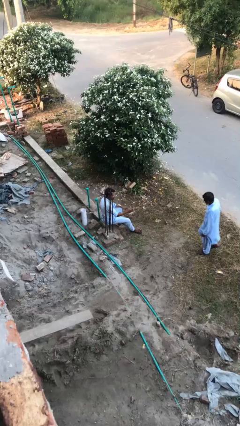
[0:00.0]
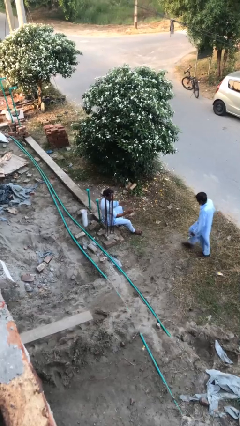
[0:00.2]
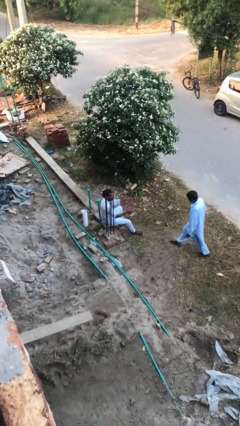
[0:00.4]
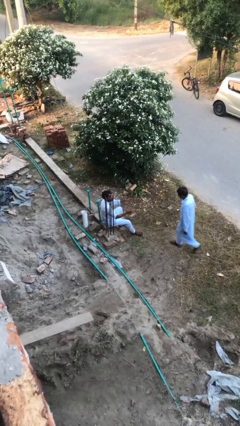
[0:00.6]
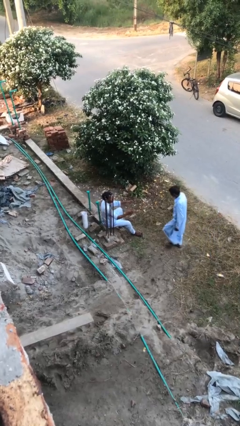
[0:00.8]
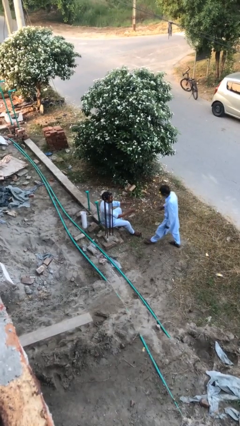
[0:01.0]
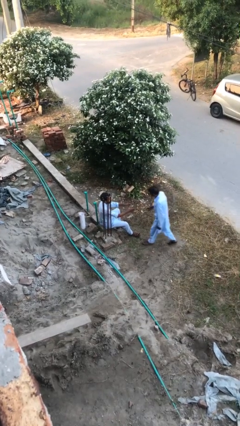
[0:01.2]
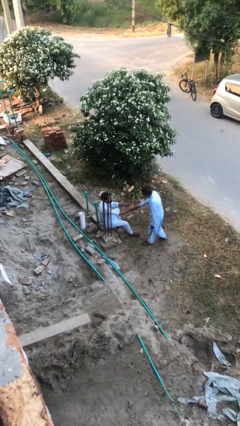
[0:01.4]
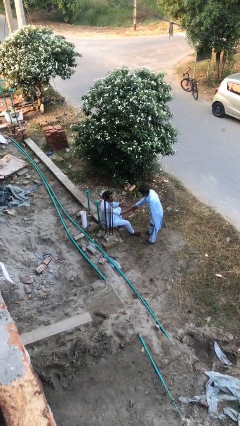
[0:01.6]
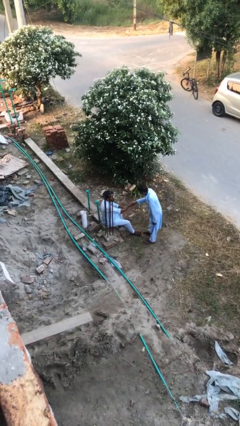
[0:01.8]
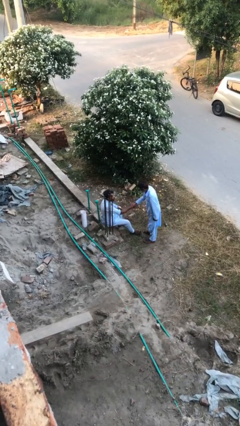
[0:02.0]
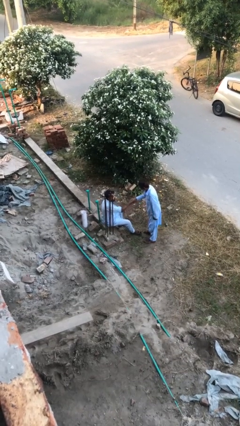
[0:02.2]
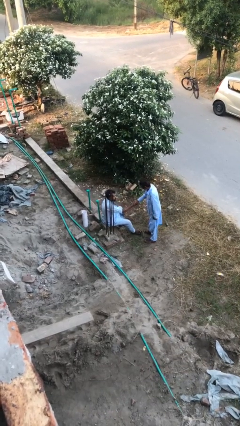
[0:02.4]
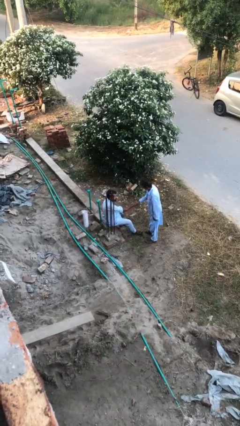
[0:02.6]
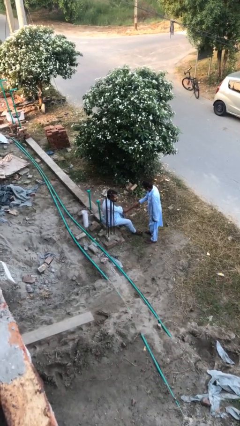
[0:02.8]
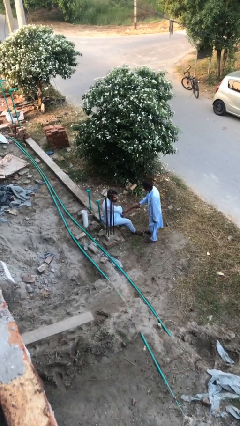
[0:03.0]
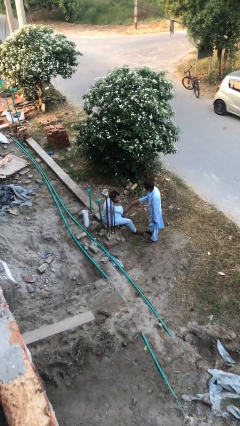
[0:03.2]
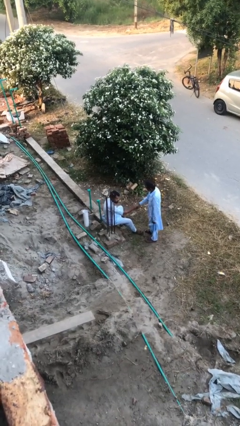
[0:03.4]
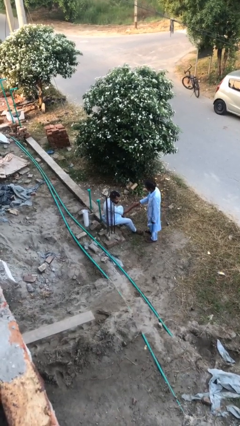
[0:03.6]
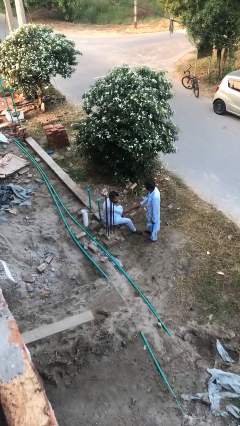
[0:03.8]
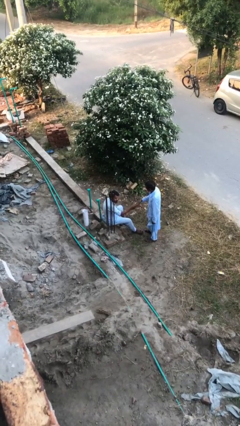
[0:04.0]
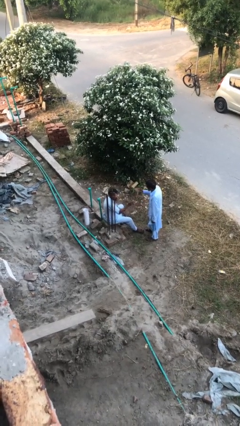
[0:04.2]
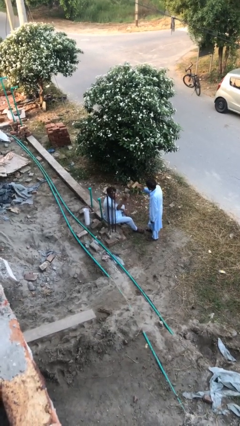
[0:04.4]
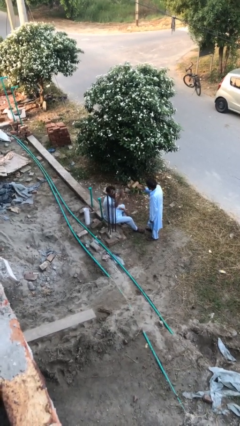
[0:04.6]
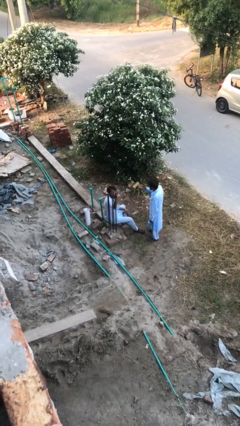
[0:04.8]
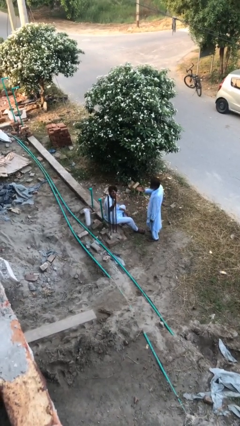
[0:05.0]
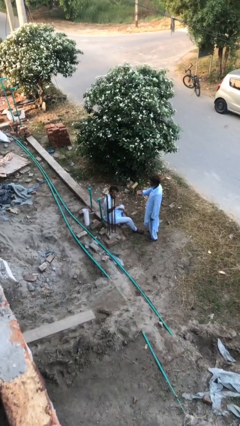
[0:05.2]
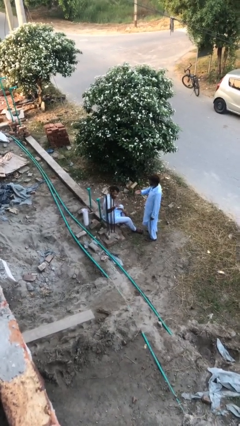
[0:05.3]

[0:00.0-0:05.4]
person shakes hand

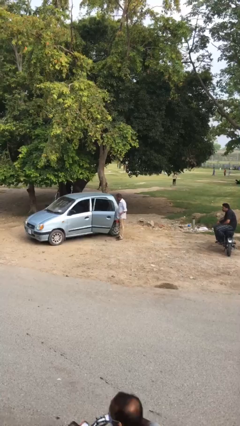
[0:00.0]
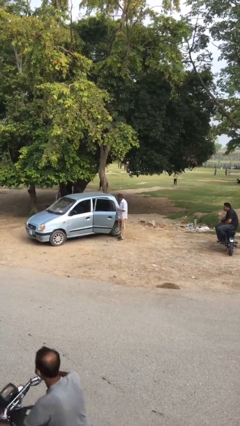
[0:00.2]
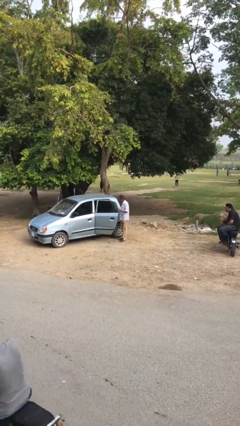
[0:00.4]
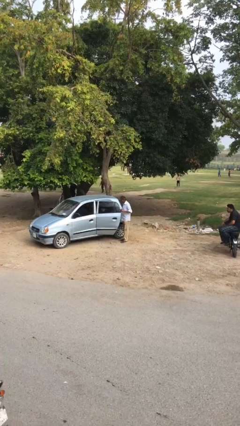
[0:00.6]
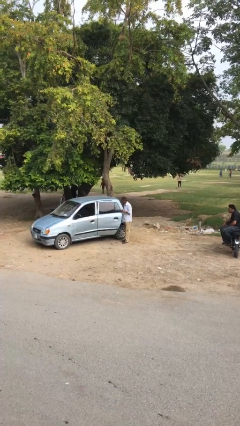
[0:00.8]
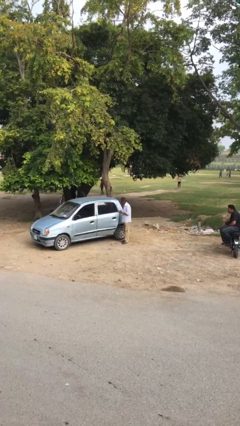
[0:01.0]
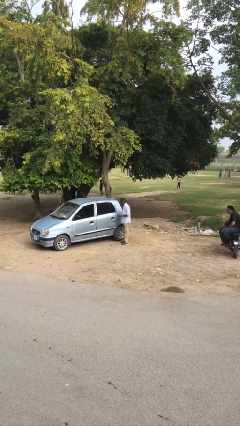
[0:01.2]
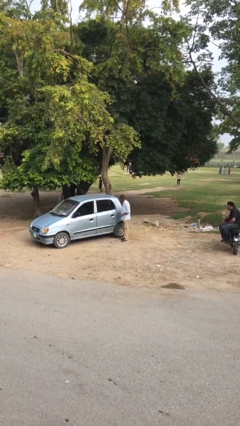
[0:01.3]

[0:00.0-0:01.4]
person closes car door

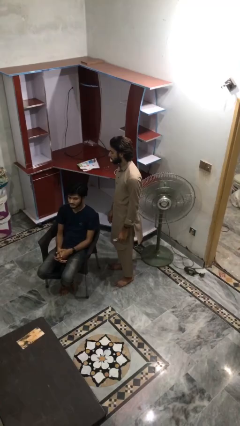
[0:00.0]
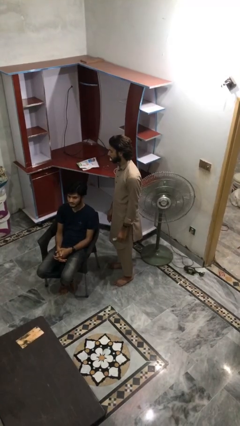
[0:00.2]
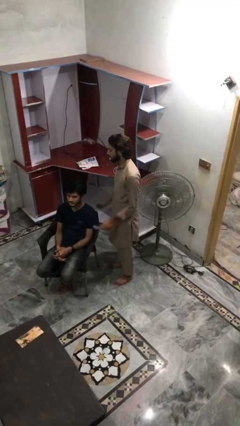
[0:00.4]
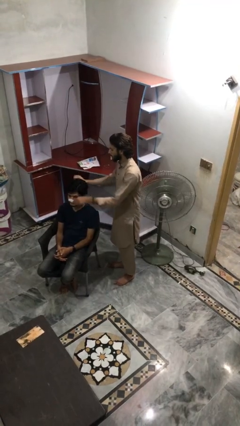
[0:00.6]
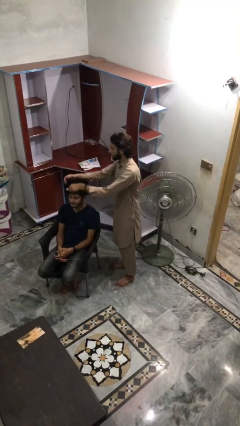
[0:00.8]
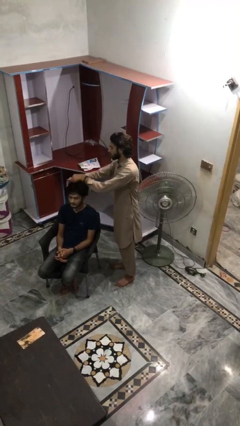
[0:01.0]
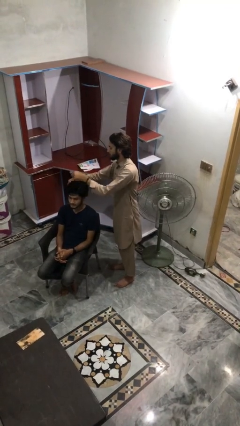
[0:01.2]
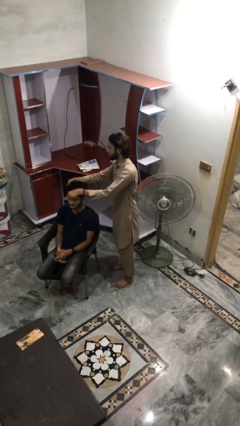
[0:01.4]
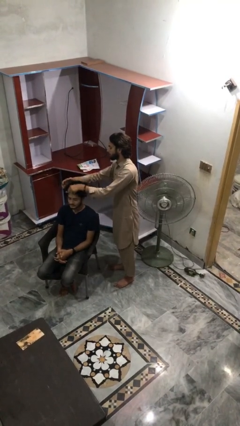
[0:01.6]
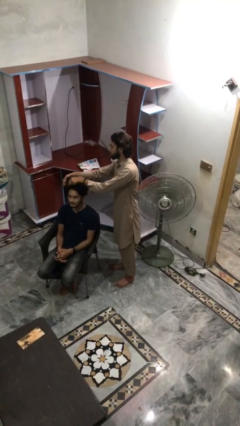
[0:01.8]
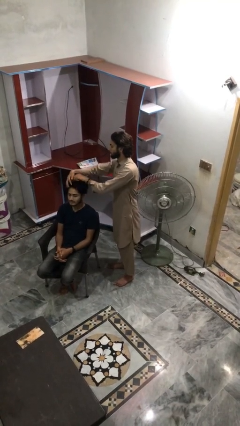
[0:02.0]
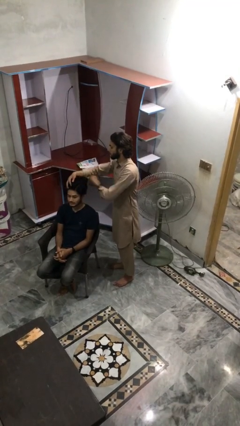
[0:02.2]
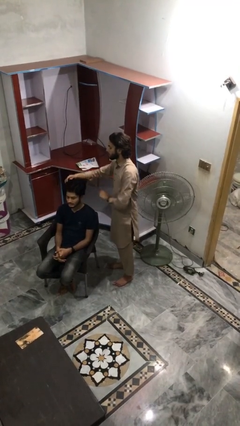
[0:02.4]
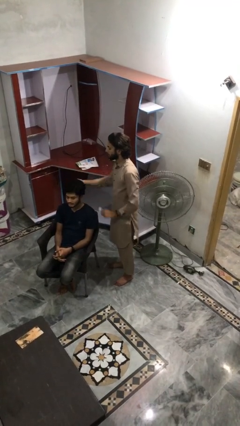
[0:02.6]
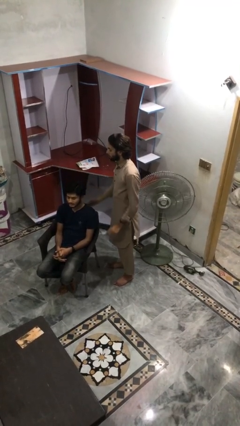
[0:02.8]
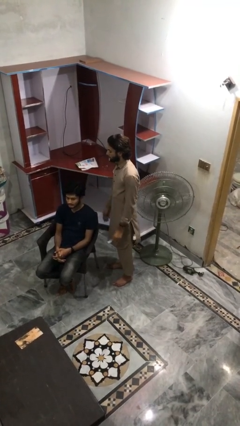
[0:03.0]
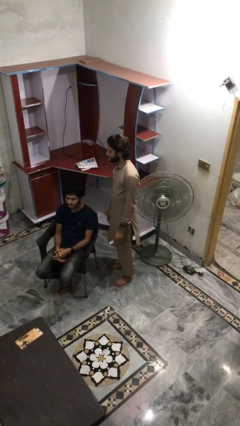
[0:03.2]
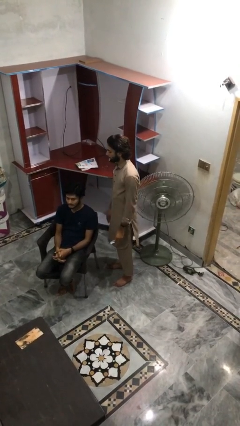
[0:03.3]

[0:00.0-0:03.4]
person brushes hair of person

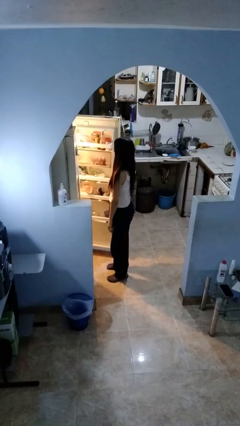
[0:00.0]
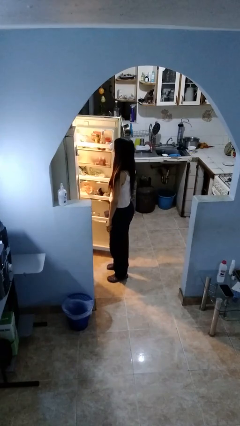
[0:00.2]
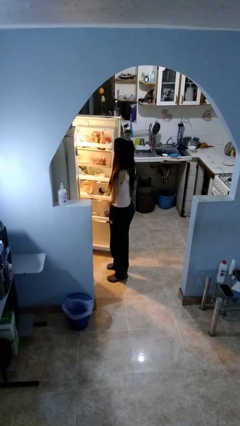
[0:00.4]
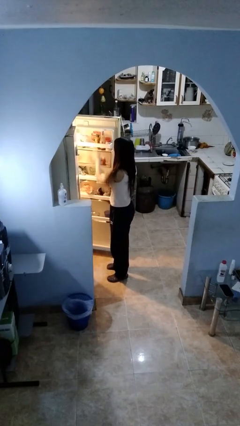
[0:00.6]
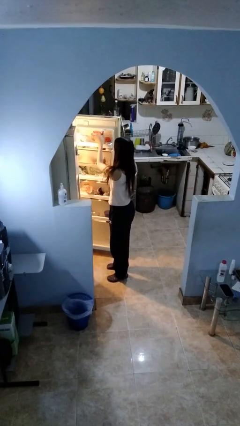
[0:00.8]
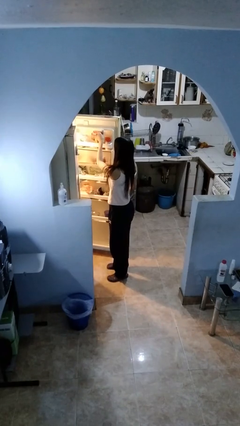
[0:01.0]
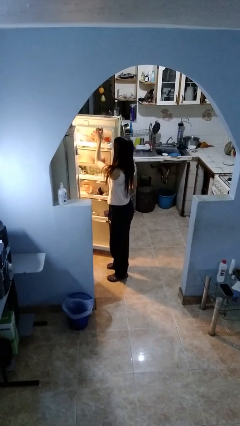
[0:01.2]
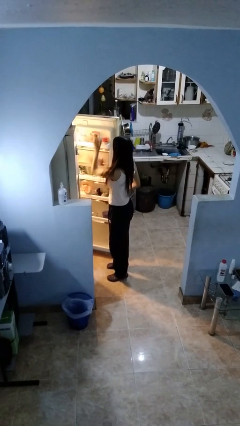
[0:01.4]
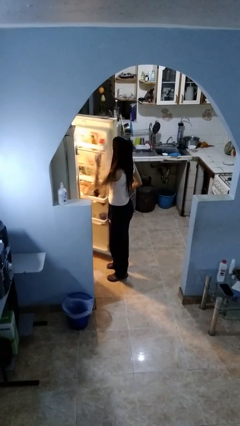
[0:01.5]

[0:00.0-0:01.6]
person takes object from refrigerator

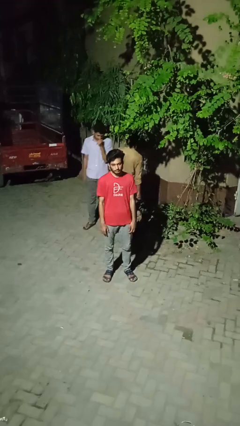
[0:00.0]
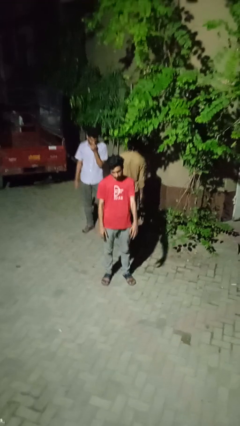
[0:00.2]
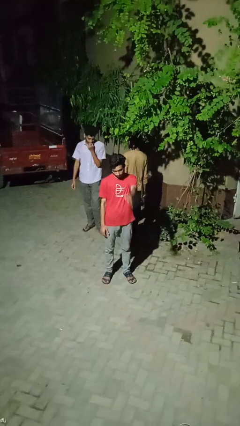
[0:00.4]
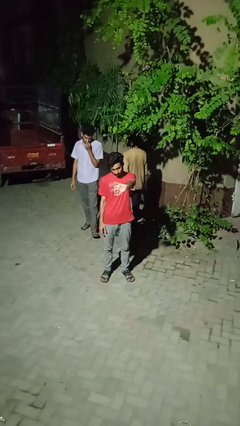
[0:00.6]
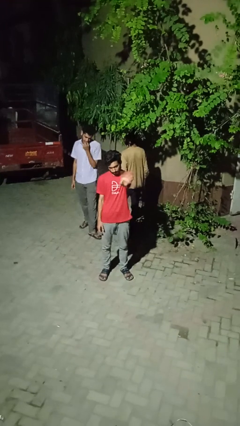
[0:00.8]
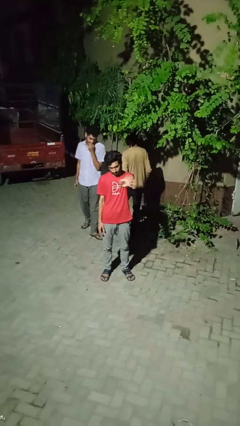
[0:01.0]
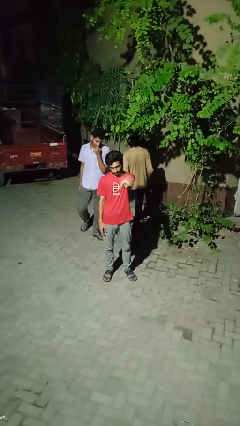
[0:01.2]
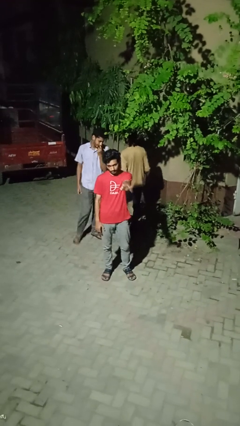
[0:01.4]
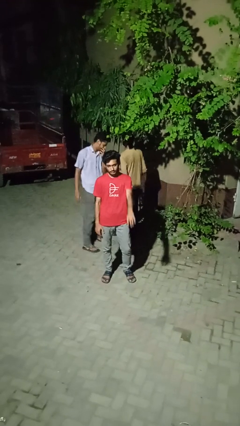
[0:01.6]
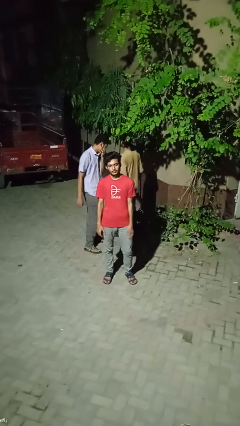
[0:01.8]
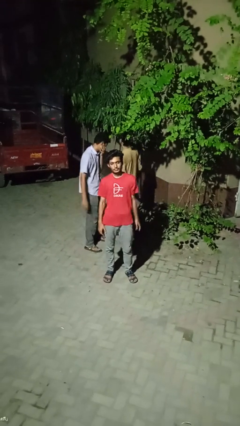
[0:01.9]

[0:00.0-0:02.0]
person waves at person

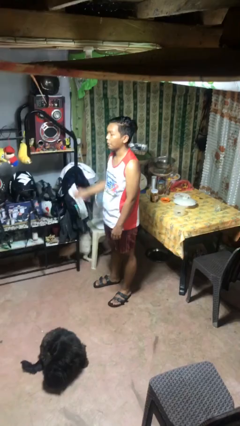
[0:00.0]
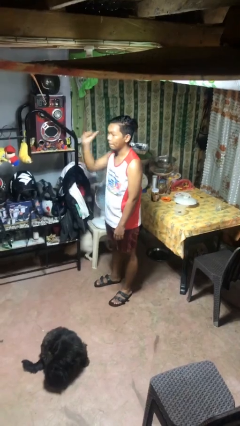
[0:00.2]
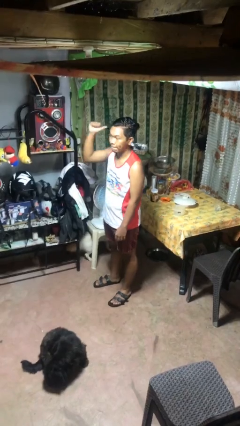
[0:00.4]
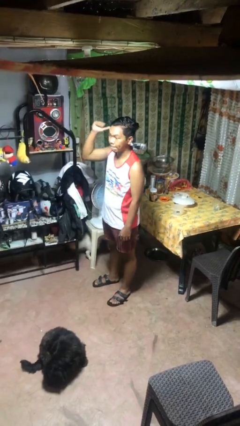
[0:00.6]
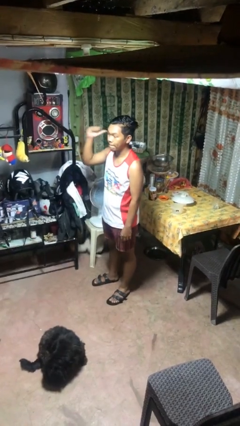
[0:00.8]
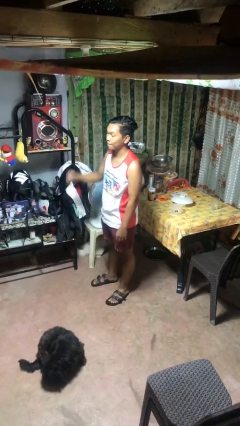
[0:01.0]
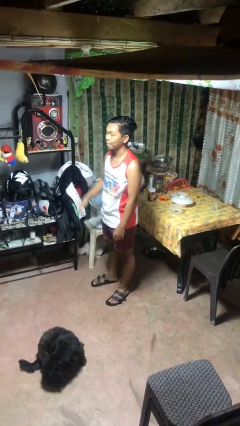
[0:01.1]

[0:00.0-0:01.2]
person gestures behind me

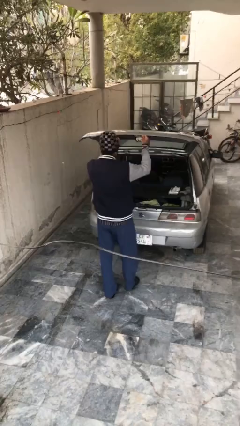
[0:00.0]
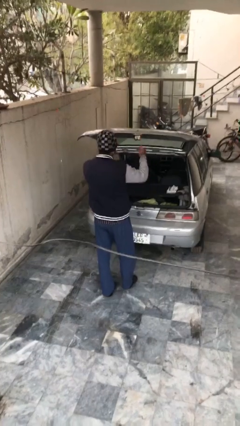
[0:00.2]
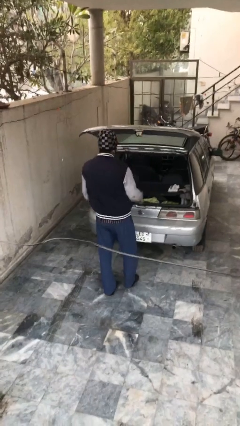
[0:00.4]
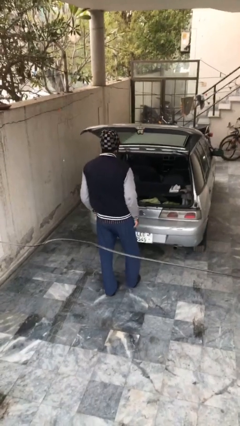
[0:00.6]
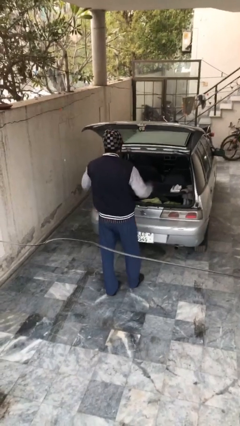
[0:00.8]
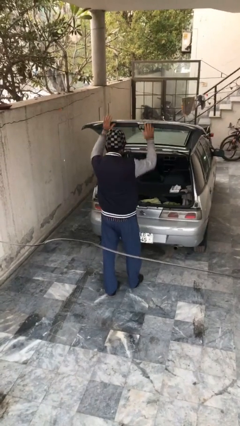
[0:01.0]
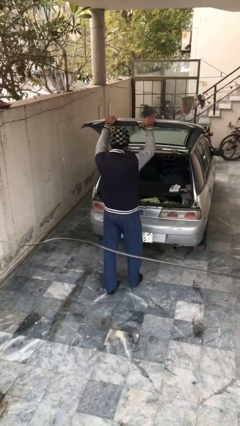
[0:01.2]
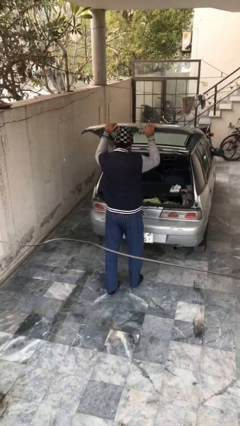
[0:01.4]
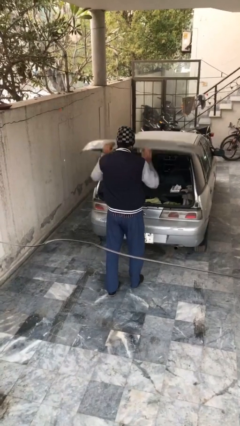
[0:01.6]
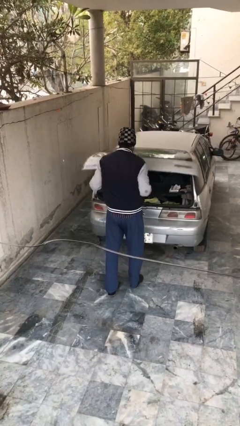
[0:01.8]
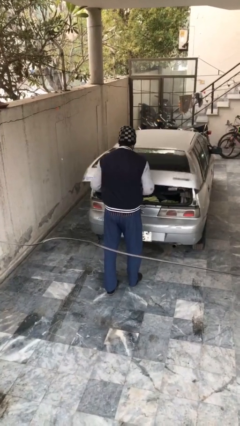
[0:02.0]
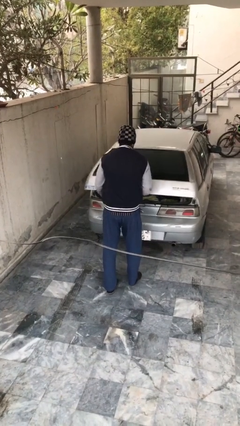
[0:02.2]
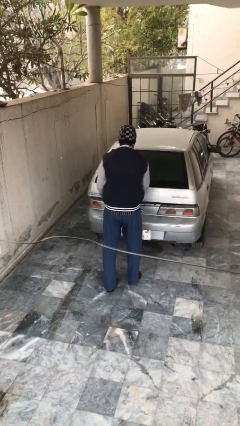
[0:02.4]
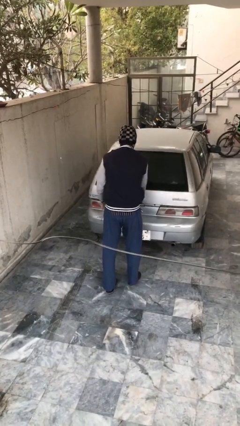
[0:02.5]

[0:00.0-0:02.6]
person closes car trunk
